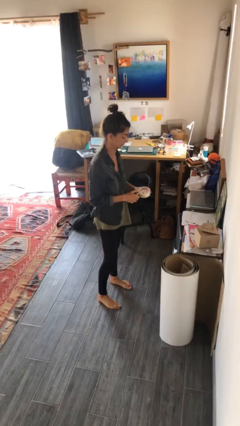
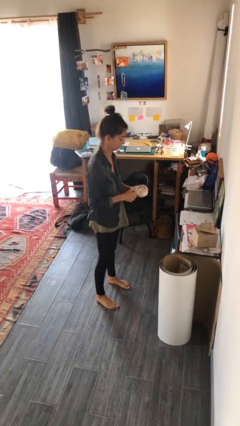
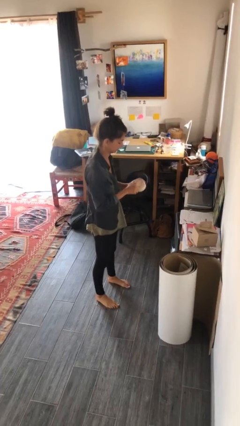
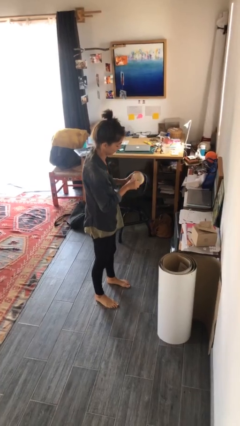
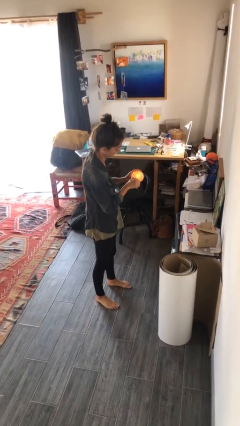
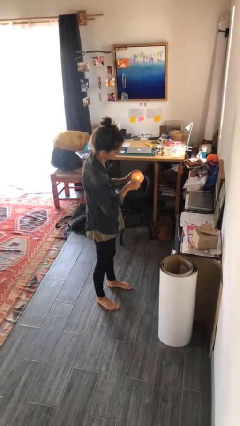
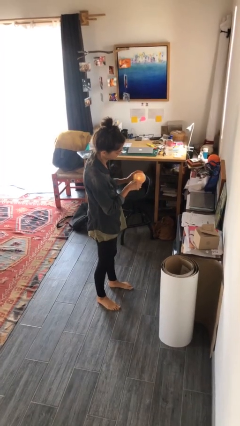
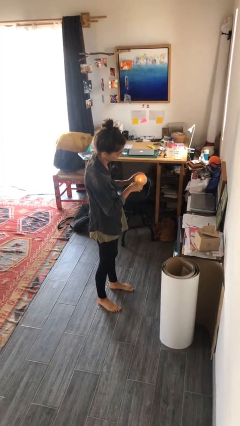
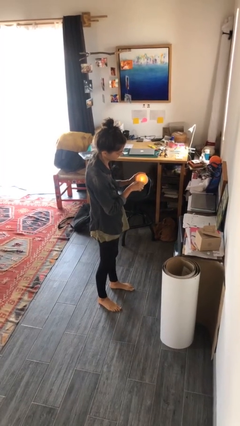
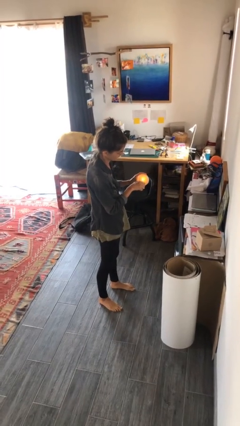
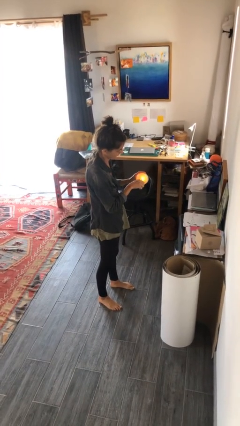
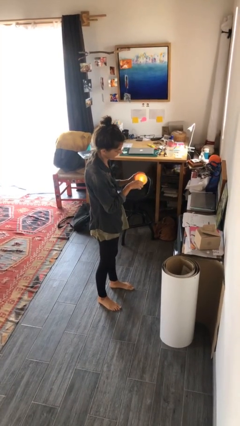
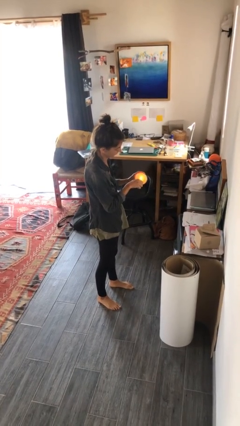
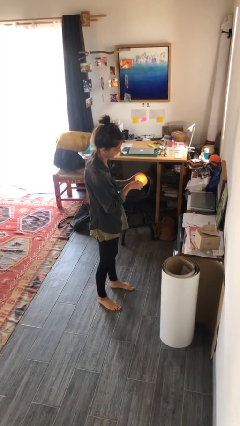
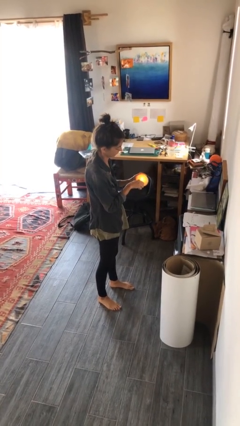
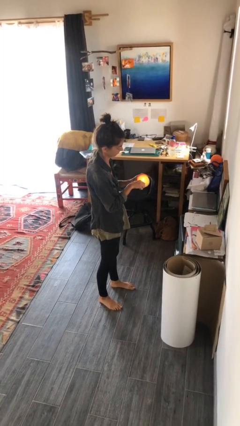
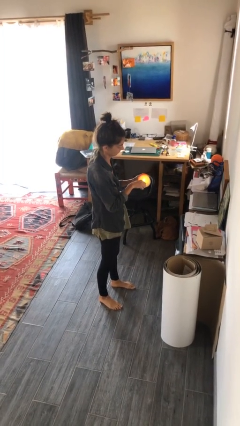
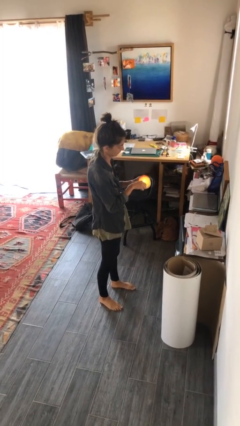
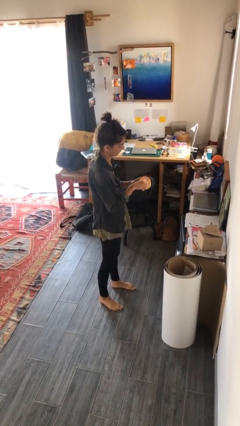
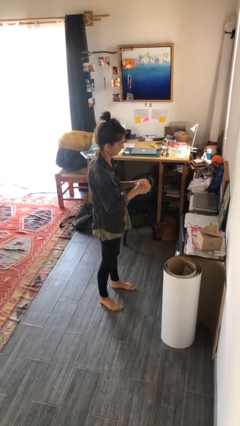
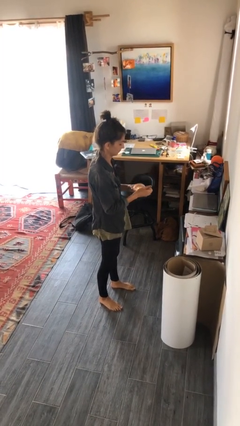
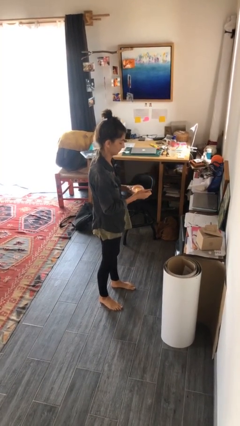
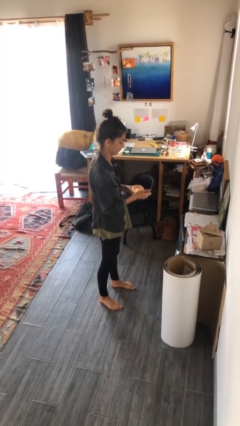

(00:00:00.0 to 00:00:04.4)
person lights candle

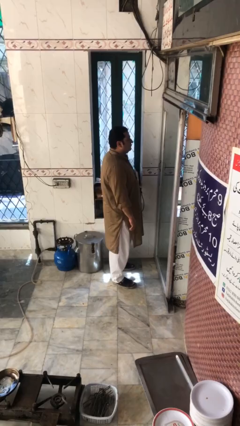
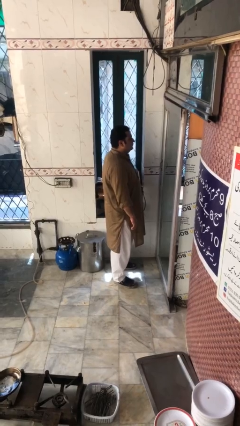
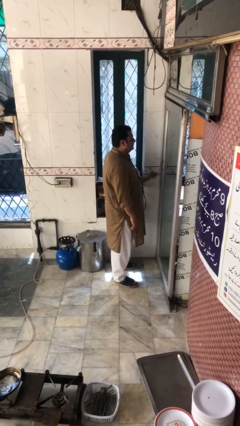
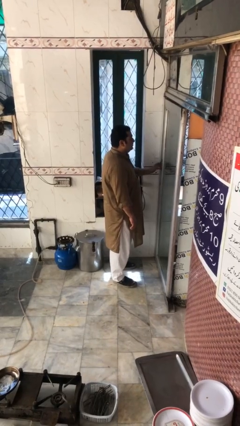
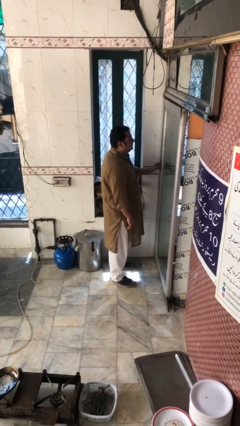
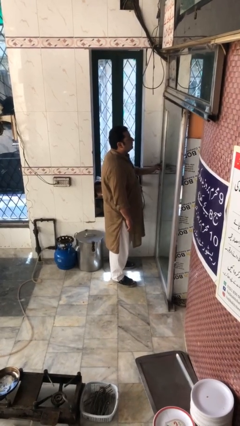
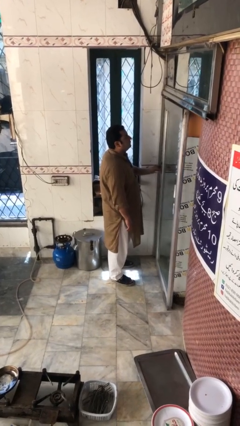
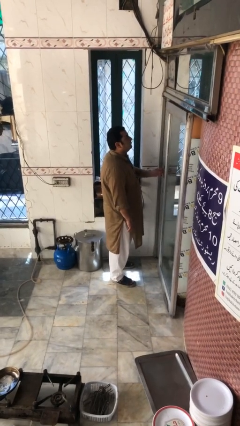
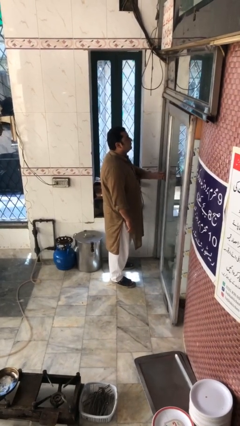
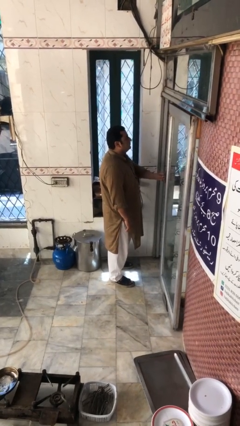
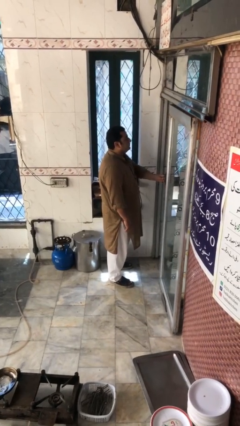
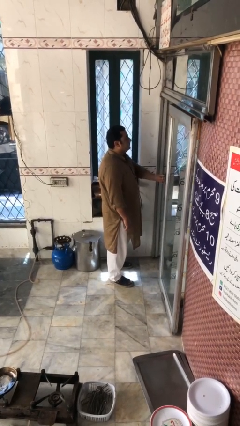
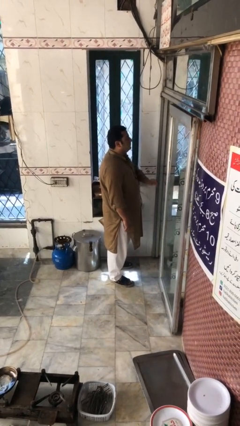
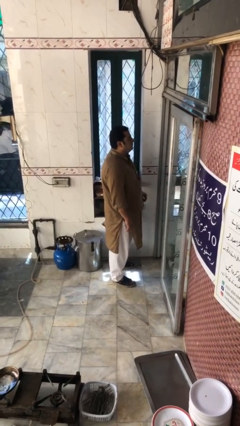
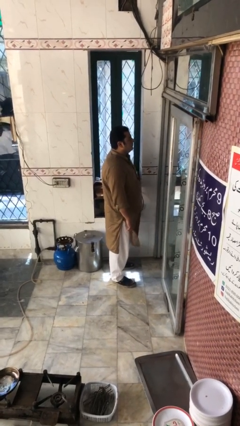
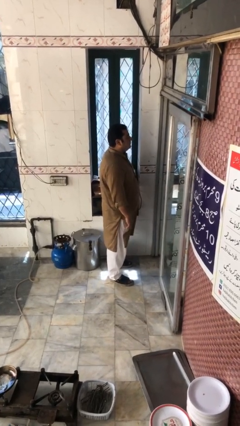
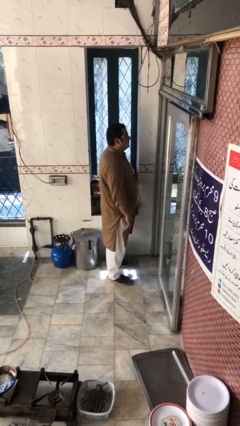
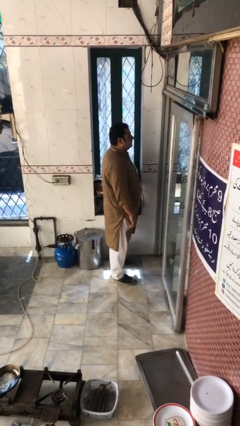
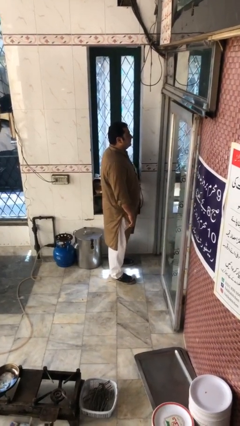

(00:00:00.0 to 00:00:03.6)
person opens sliding door

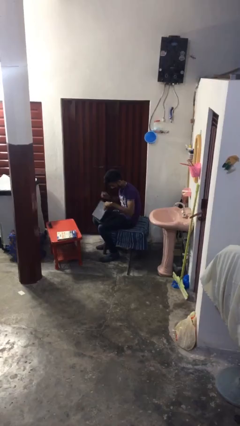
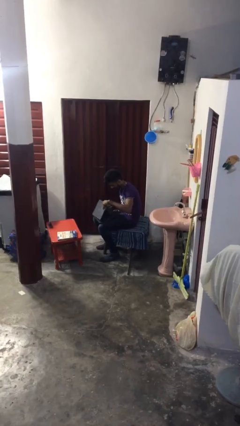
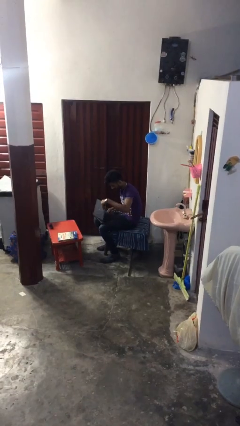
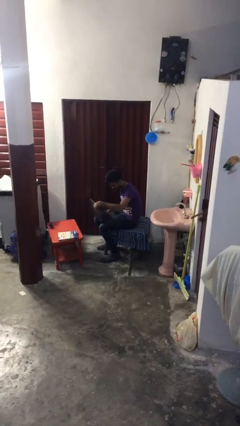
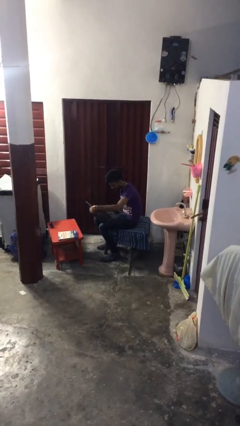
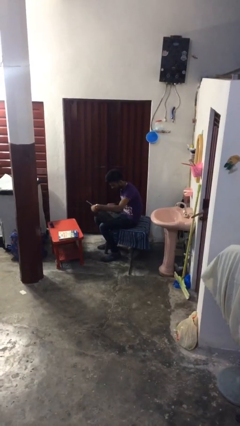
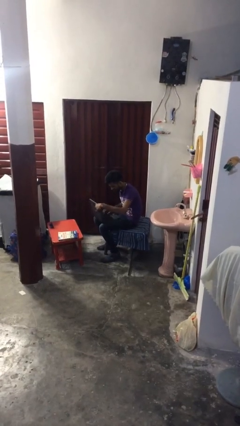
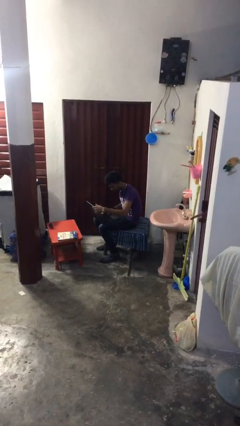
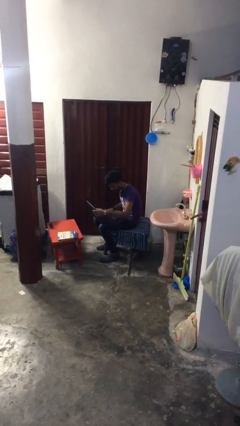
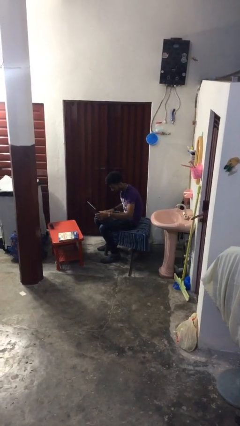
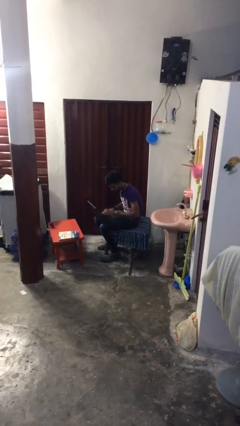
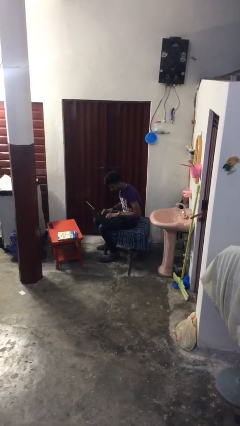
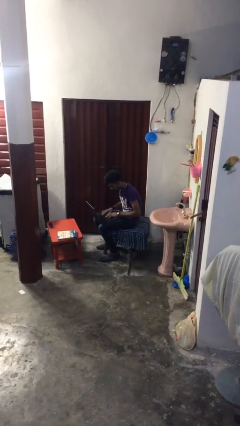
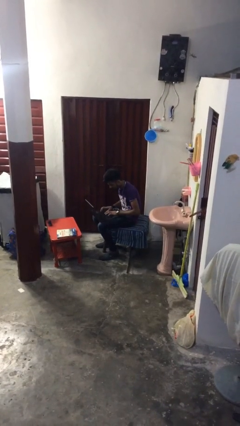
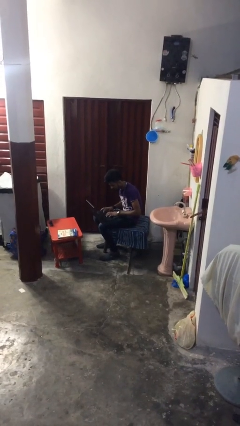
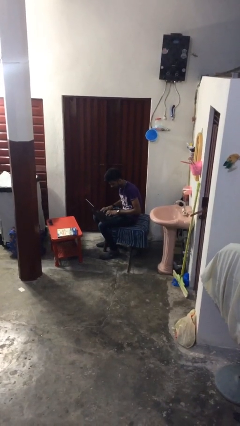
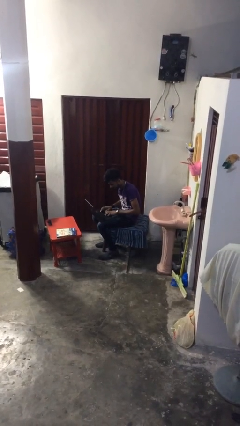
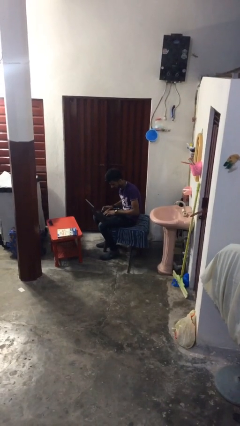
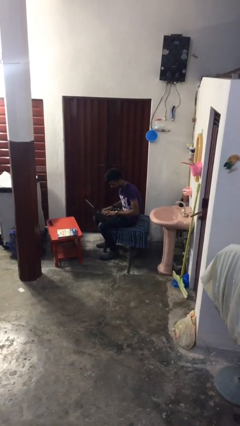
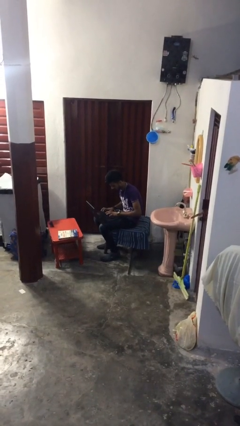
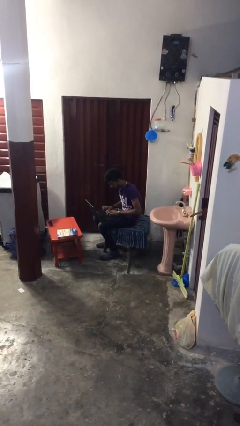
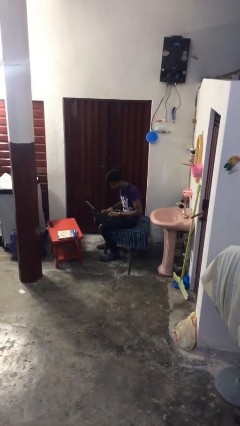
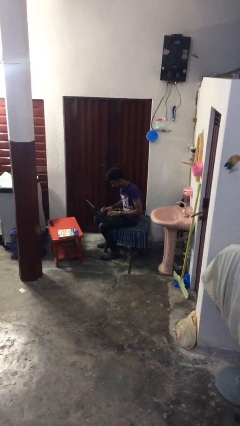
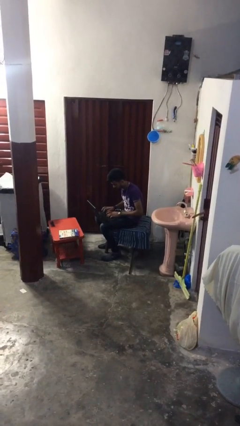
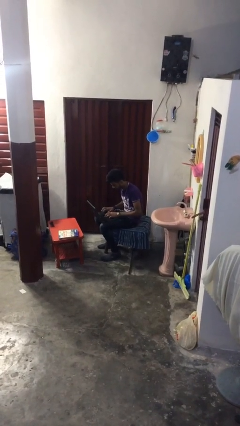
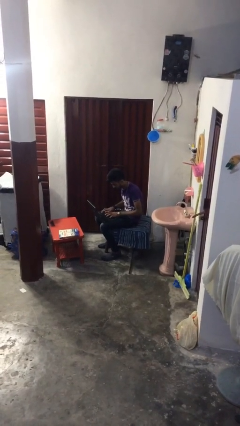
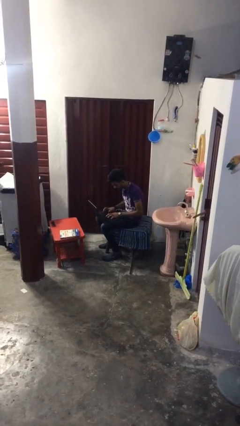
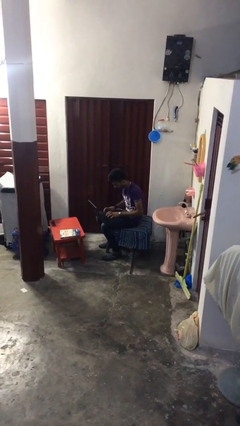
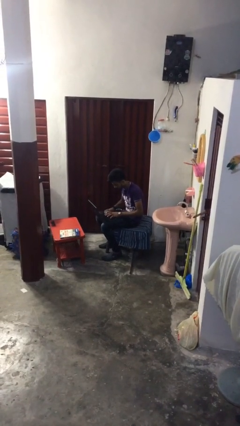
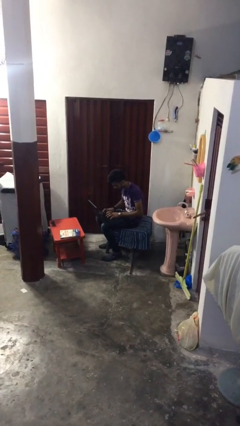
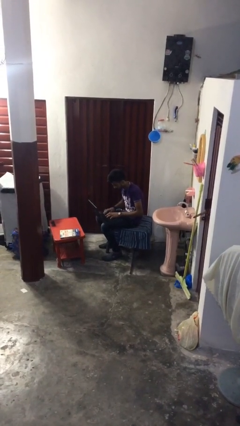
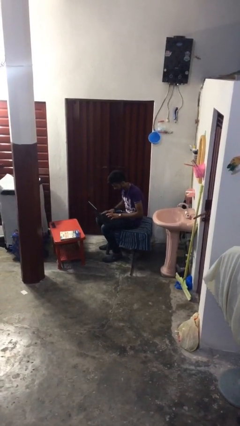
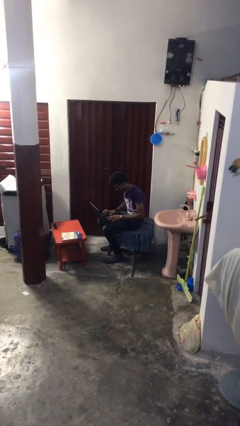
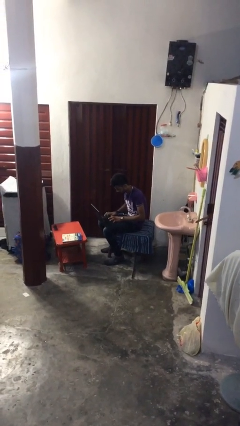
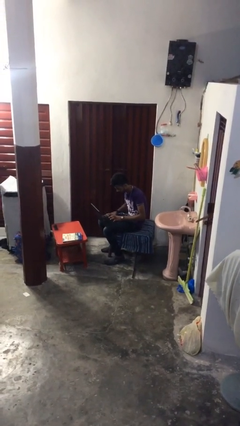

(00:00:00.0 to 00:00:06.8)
person interacts with laptop

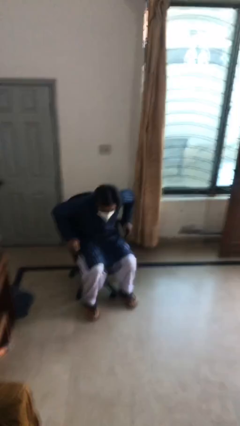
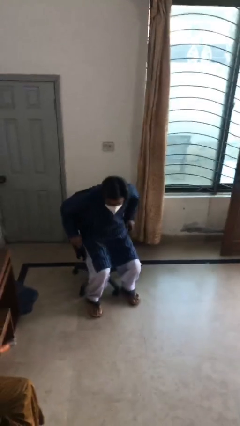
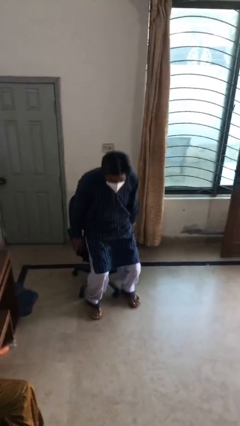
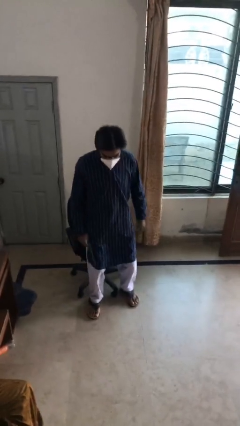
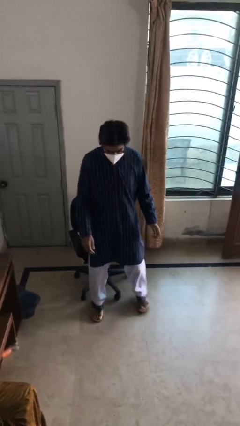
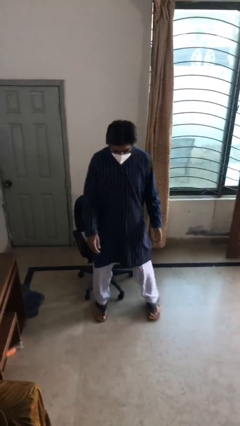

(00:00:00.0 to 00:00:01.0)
person stands up

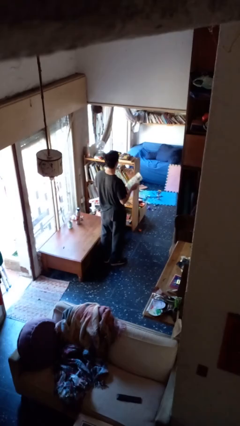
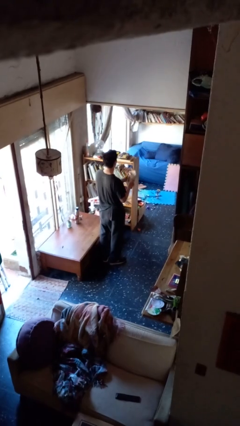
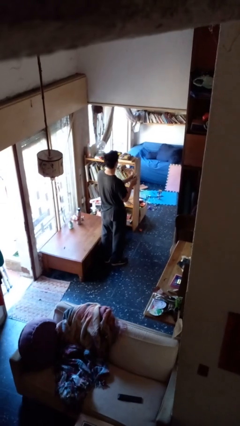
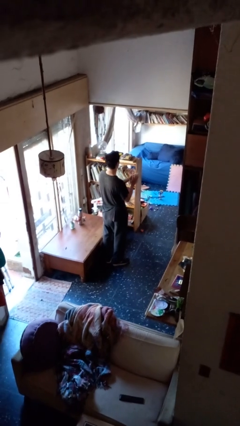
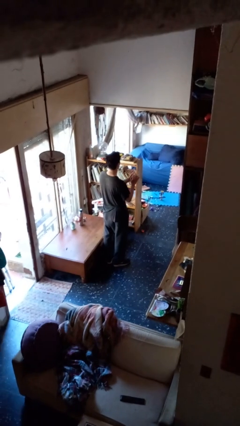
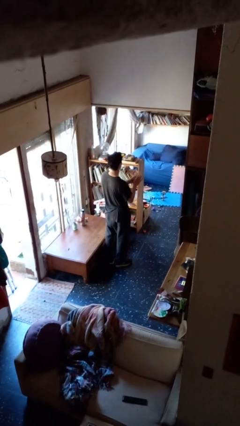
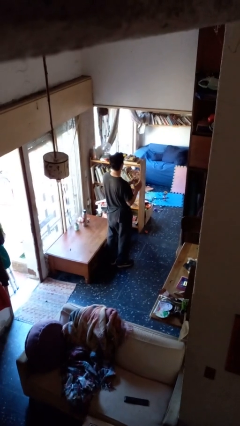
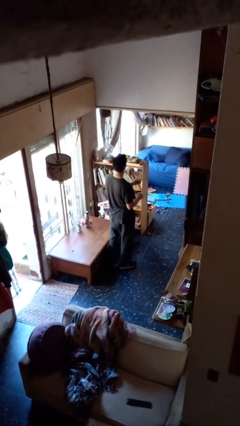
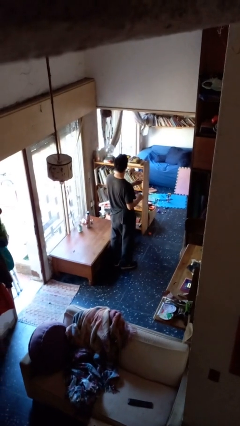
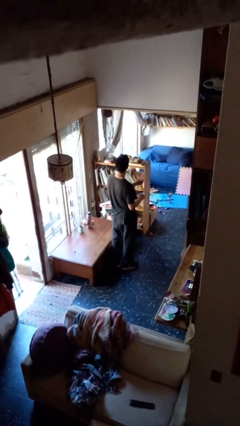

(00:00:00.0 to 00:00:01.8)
person crumples paper

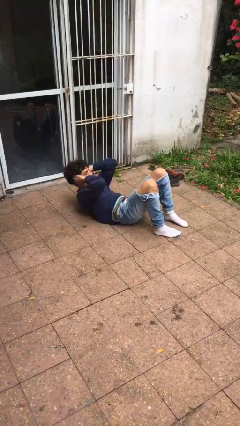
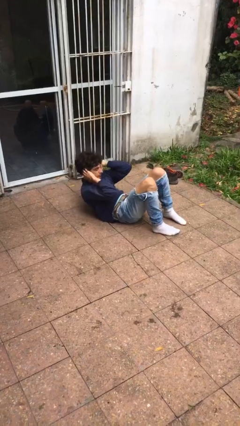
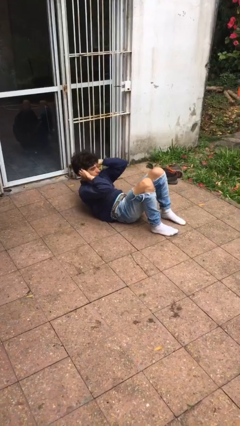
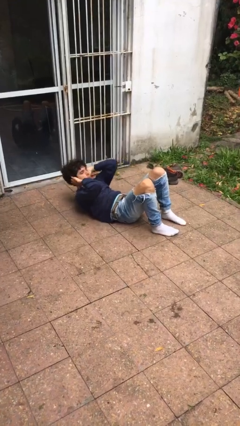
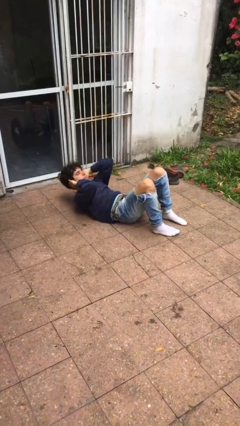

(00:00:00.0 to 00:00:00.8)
person exercises with situp
